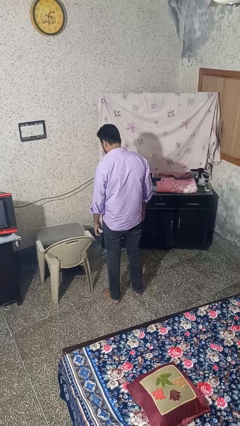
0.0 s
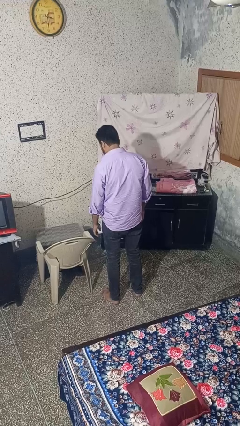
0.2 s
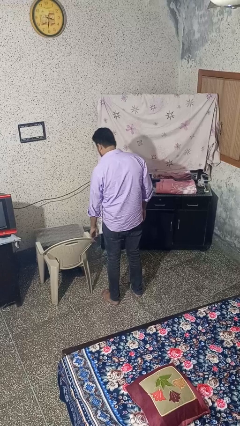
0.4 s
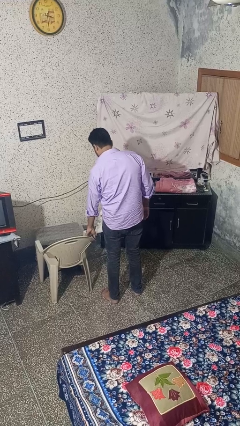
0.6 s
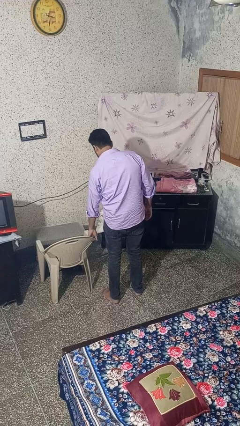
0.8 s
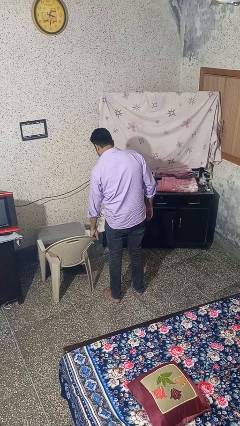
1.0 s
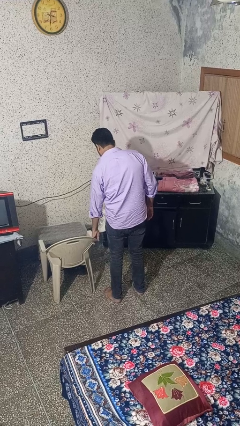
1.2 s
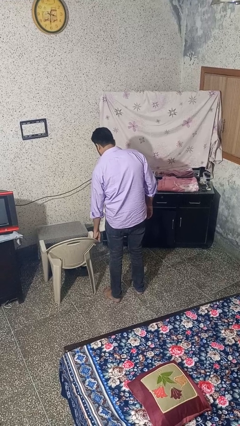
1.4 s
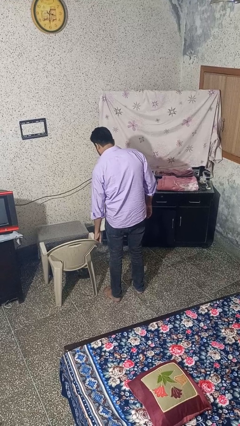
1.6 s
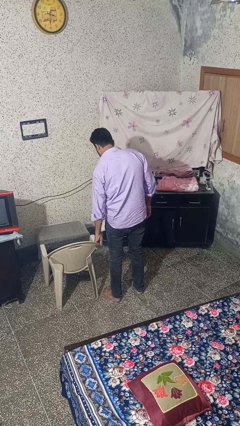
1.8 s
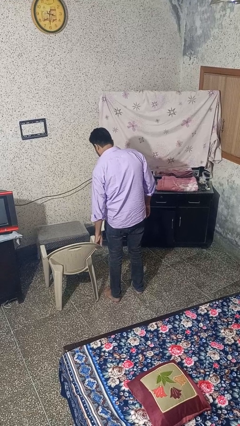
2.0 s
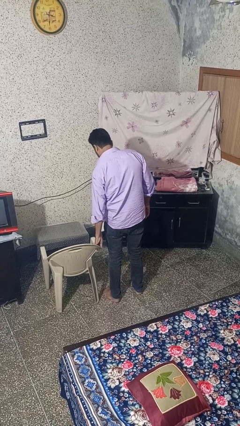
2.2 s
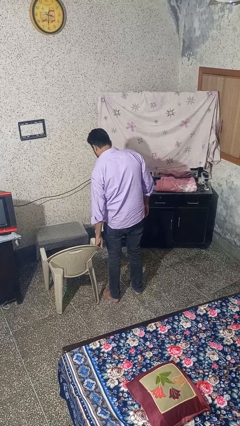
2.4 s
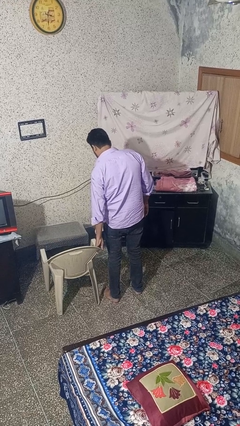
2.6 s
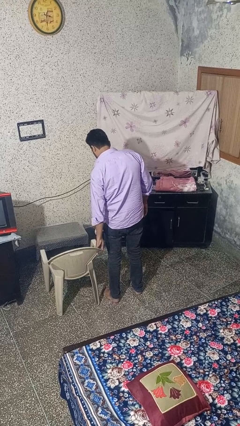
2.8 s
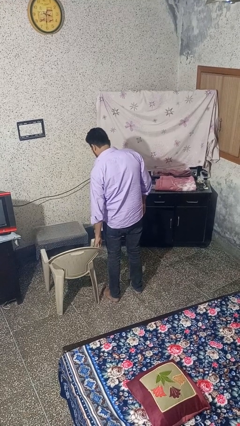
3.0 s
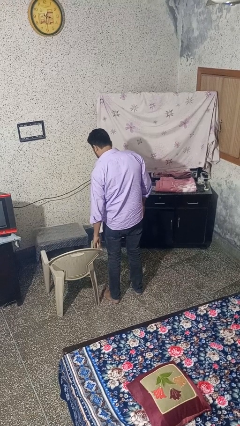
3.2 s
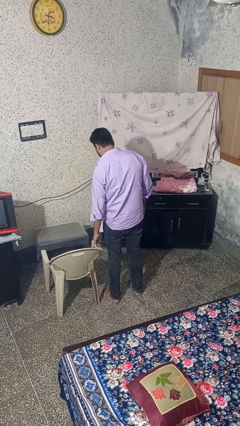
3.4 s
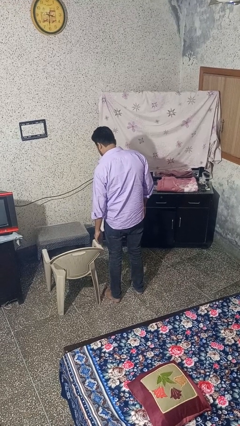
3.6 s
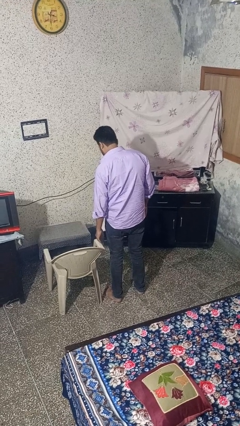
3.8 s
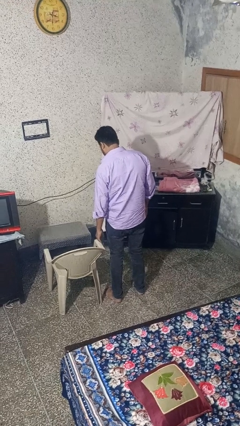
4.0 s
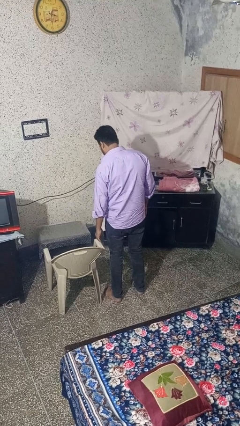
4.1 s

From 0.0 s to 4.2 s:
person pulls out chair

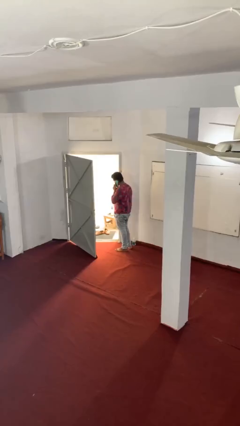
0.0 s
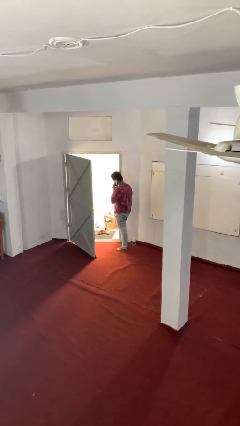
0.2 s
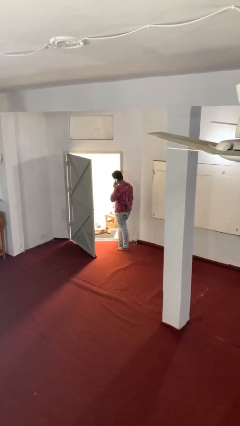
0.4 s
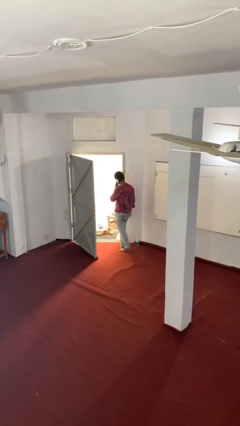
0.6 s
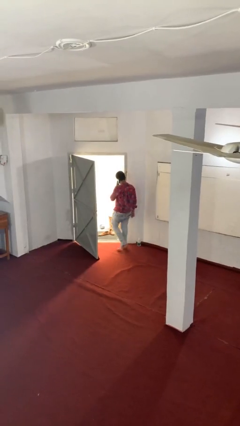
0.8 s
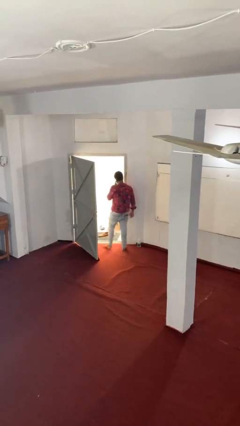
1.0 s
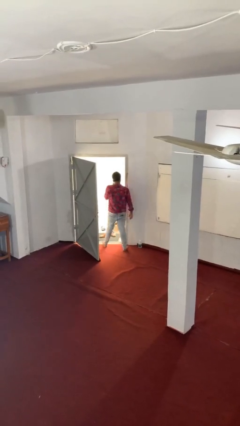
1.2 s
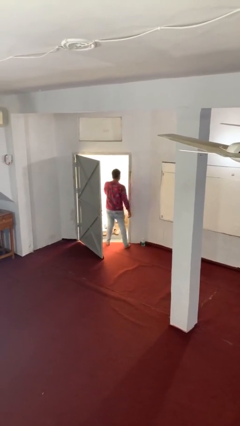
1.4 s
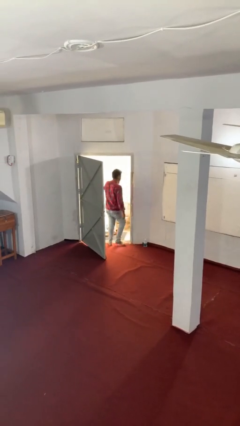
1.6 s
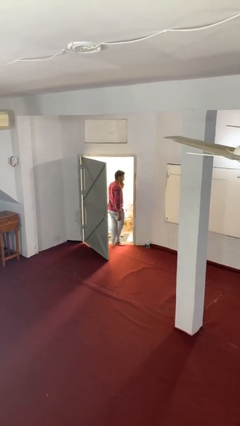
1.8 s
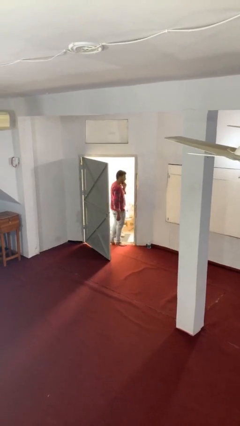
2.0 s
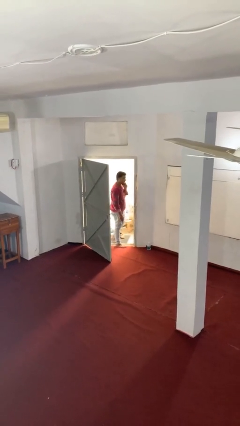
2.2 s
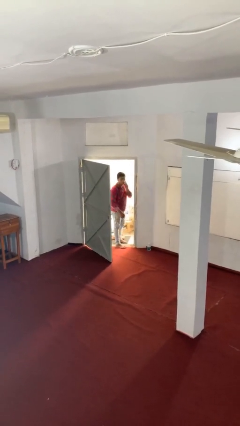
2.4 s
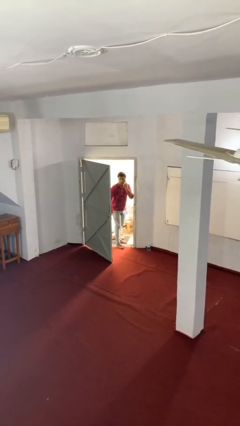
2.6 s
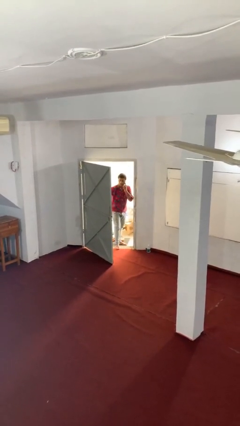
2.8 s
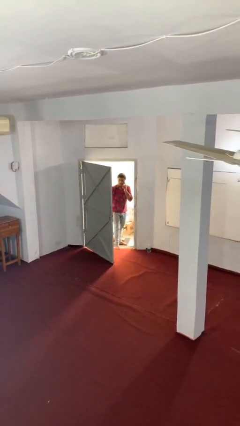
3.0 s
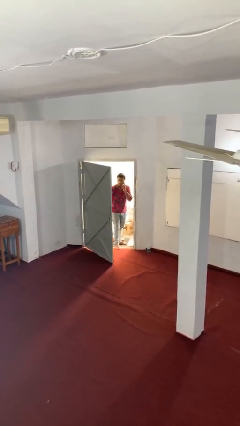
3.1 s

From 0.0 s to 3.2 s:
person exits scene through structure

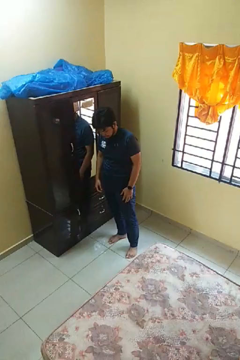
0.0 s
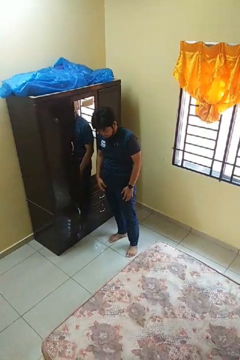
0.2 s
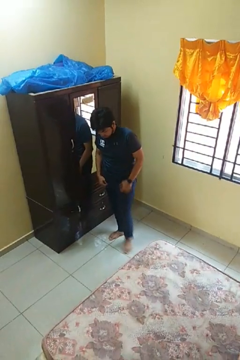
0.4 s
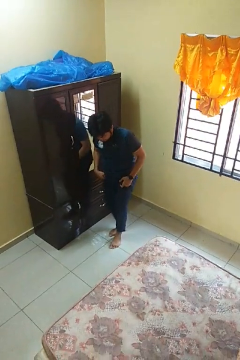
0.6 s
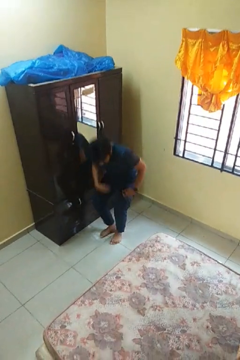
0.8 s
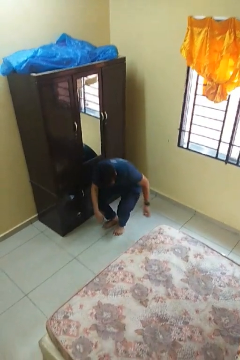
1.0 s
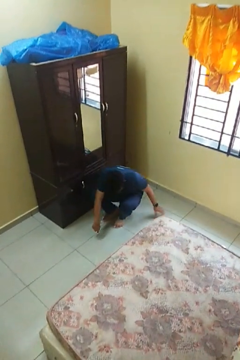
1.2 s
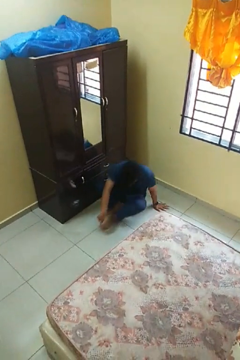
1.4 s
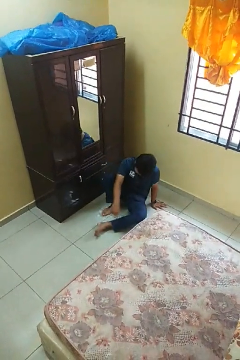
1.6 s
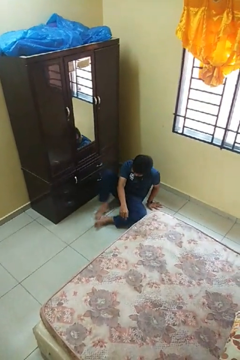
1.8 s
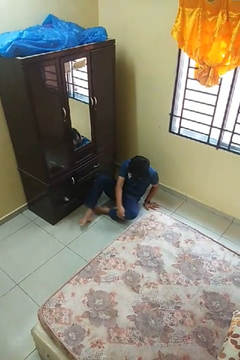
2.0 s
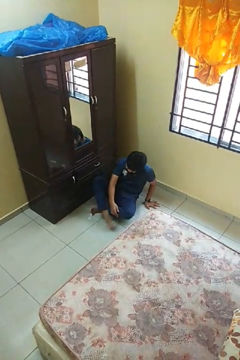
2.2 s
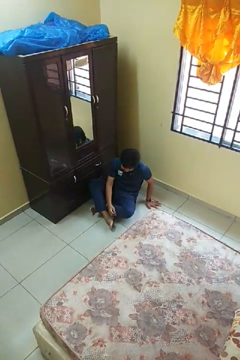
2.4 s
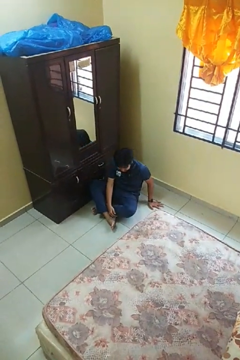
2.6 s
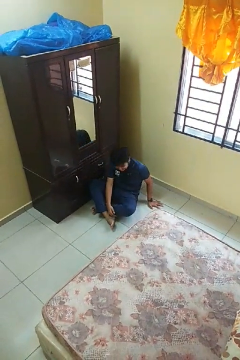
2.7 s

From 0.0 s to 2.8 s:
person sits crisscross

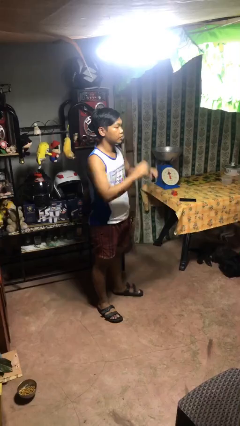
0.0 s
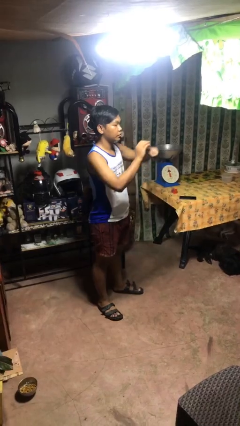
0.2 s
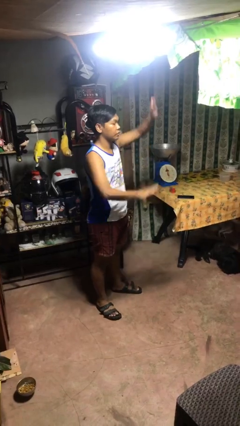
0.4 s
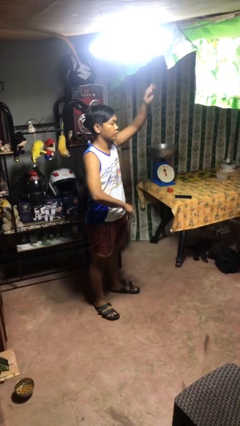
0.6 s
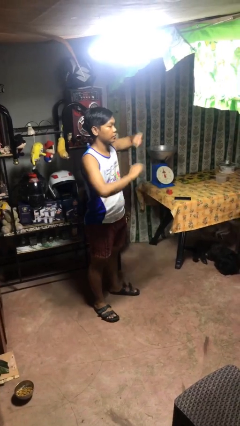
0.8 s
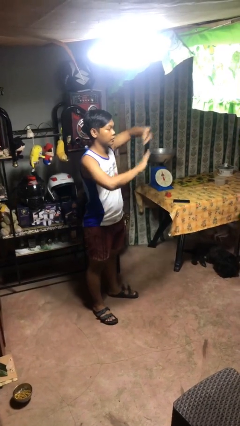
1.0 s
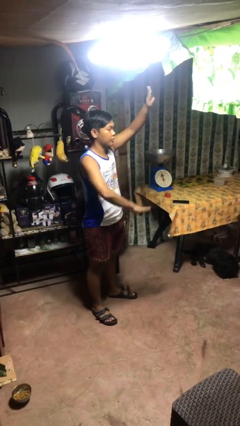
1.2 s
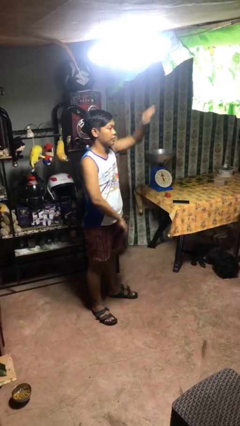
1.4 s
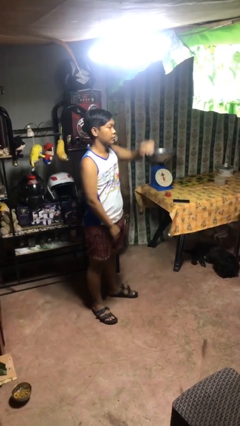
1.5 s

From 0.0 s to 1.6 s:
person gestures zoom in

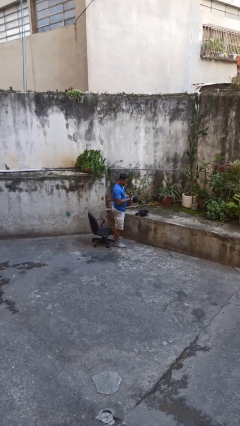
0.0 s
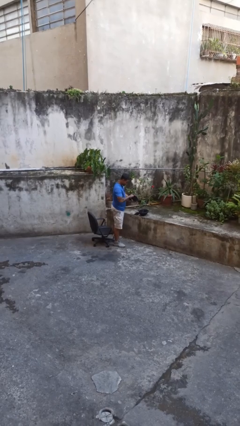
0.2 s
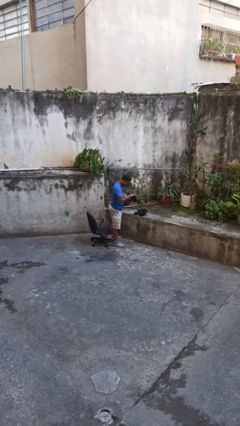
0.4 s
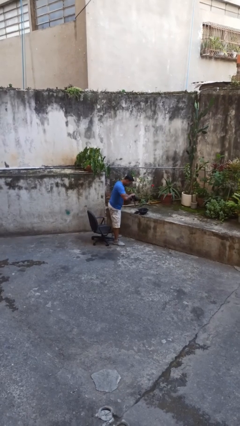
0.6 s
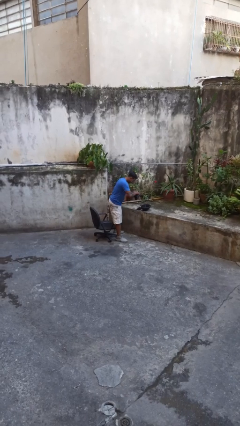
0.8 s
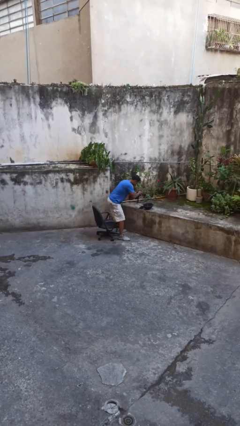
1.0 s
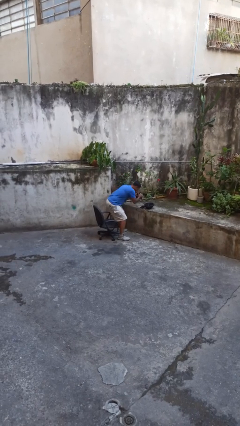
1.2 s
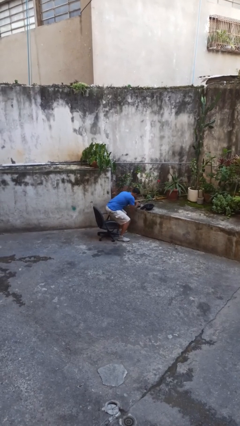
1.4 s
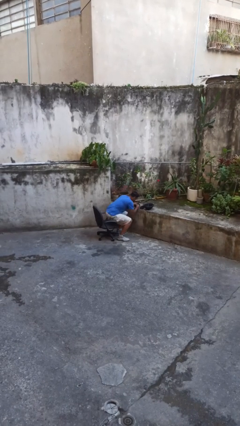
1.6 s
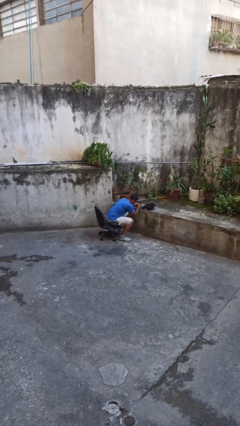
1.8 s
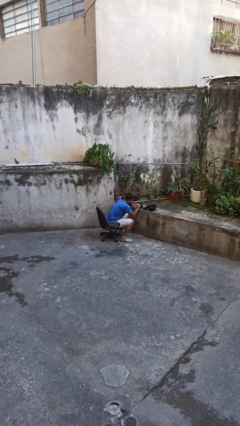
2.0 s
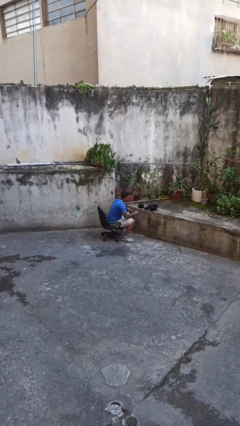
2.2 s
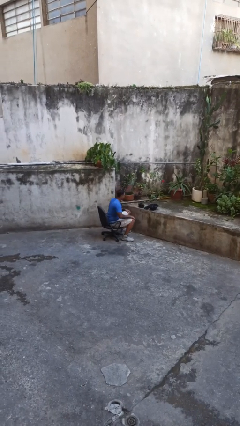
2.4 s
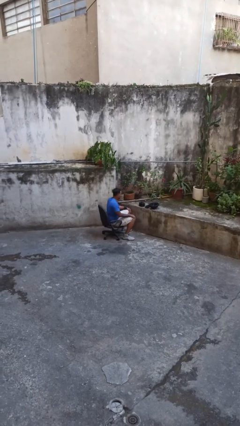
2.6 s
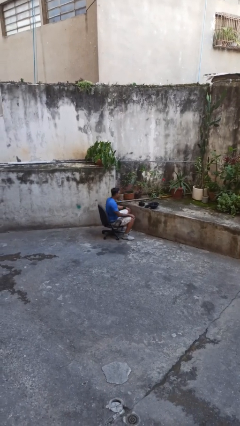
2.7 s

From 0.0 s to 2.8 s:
person sits down

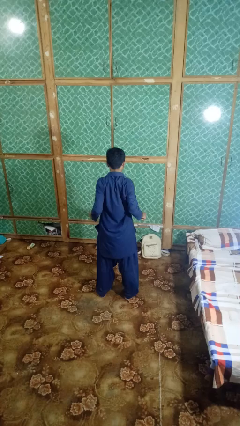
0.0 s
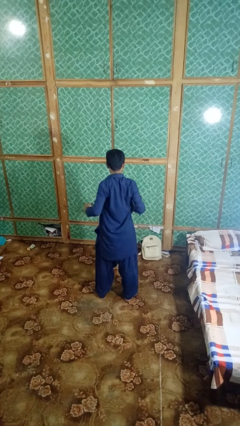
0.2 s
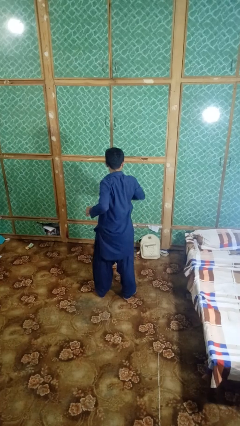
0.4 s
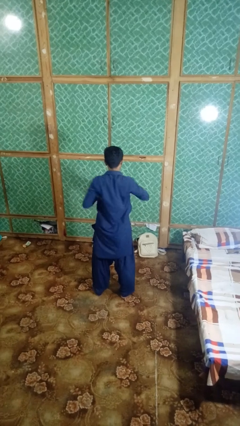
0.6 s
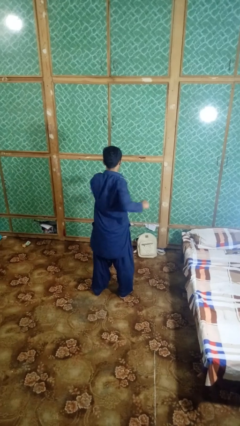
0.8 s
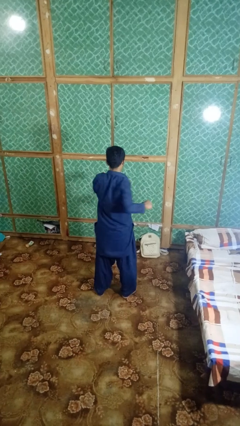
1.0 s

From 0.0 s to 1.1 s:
person stretches arms to side

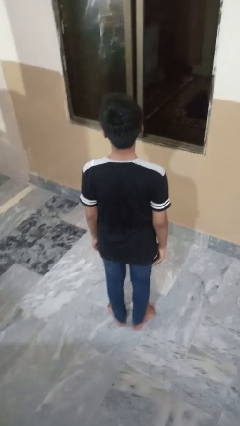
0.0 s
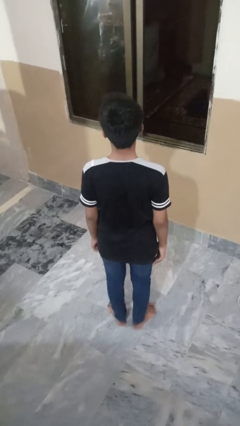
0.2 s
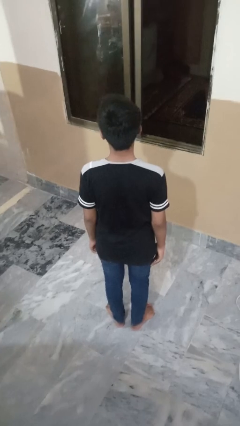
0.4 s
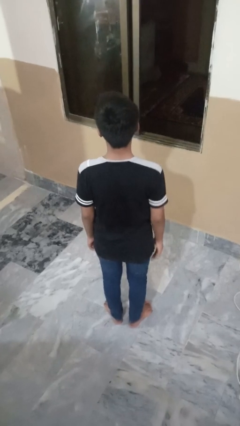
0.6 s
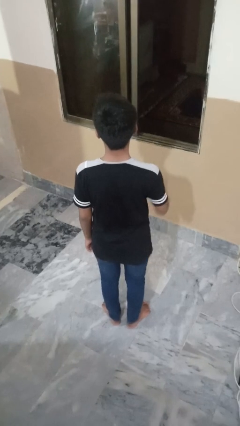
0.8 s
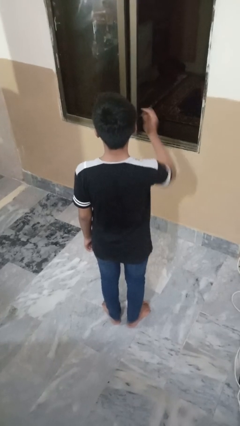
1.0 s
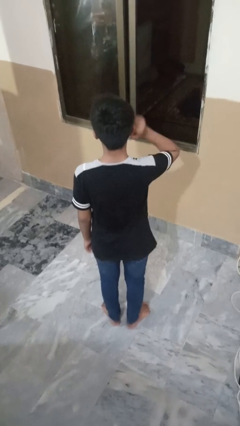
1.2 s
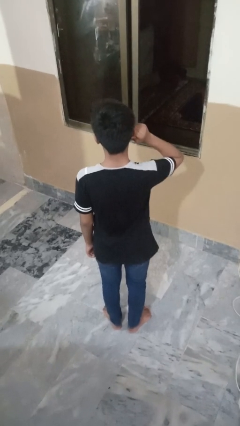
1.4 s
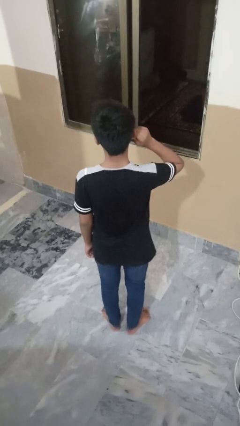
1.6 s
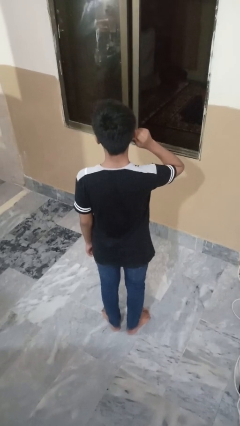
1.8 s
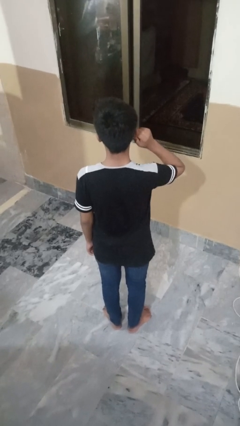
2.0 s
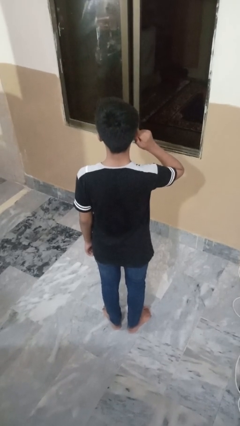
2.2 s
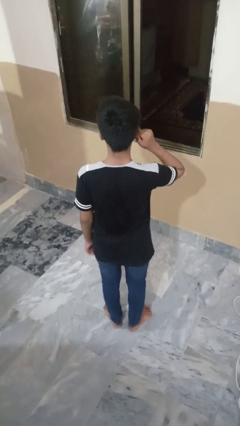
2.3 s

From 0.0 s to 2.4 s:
person touches earlobe
